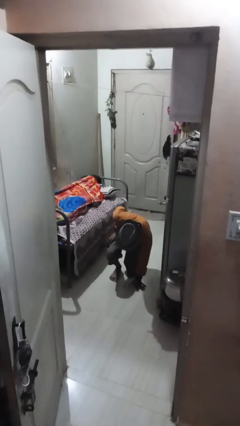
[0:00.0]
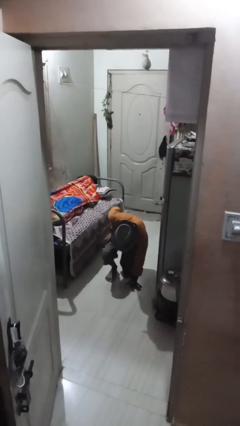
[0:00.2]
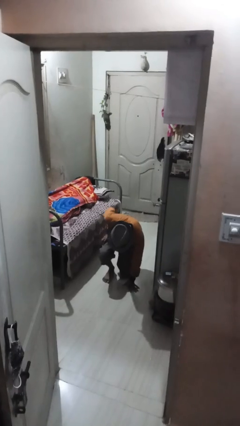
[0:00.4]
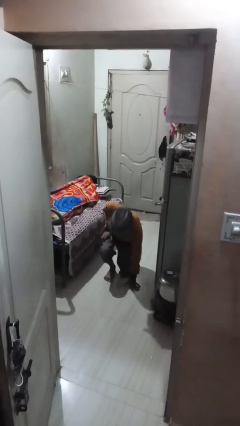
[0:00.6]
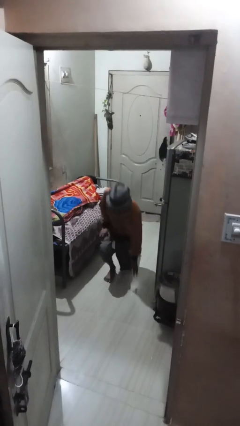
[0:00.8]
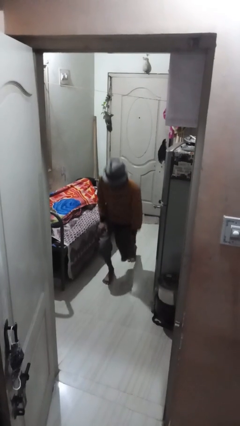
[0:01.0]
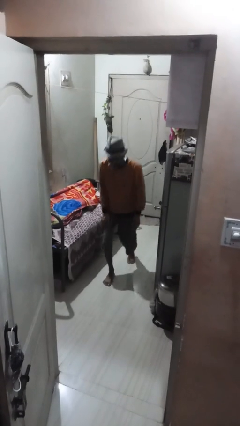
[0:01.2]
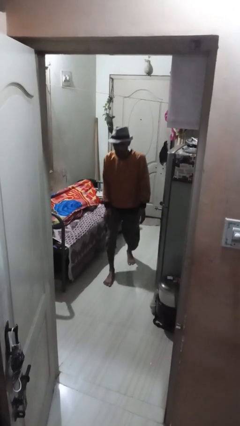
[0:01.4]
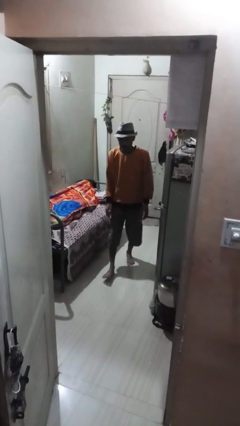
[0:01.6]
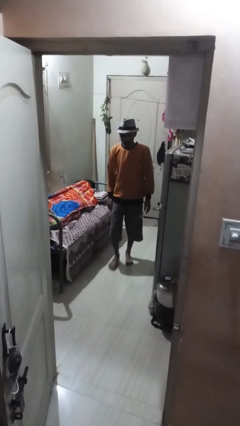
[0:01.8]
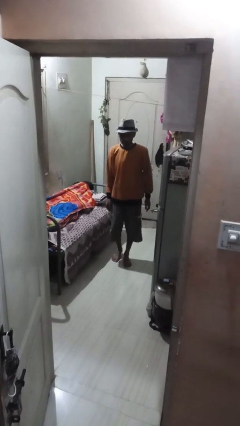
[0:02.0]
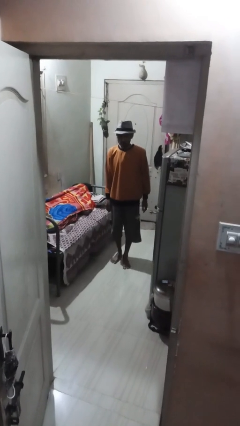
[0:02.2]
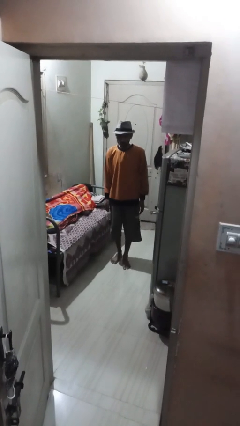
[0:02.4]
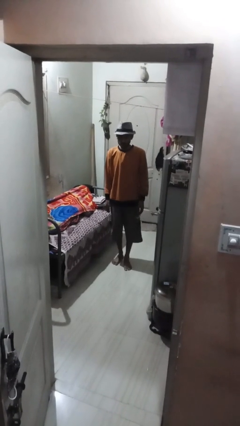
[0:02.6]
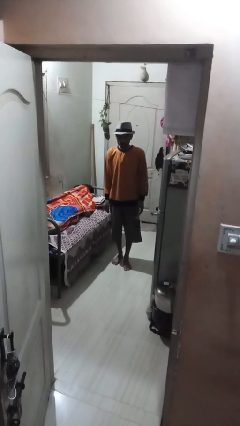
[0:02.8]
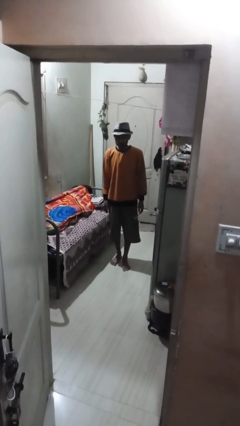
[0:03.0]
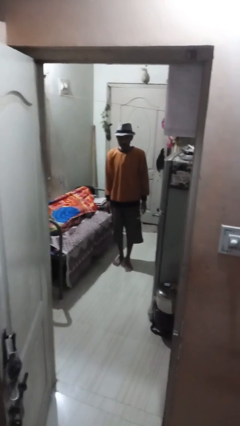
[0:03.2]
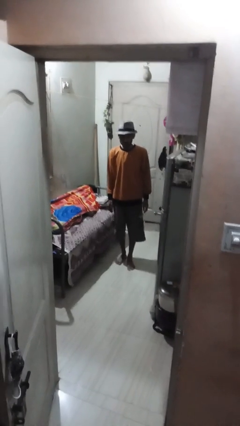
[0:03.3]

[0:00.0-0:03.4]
person stands up from floor

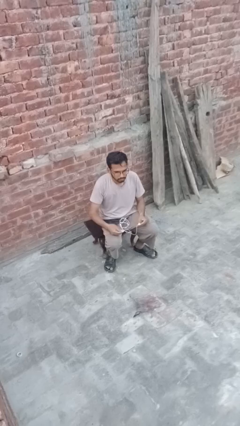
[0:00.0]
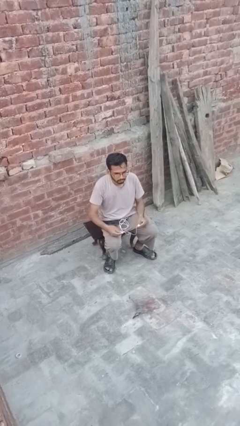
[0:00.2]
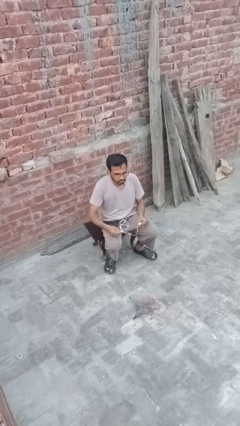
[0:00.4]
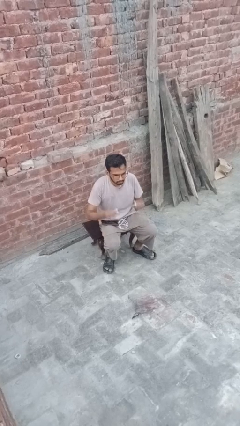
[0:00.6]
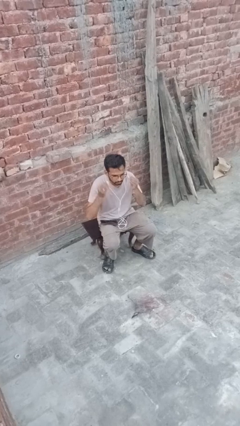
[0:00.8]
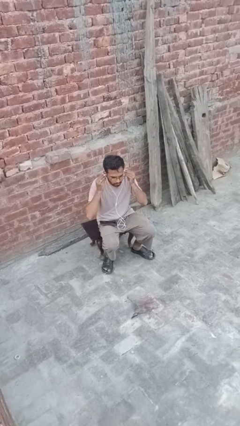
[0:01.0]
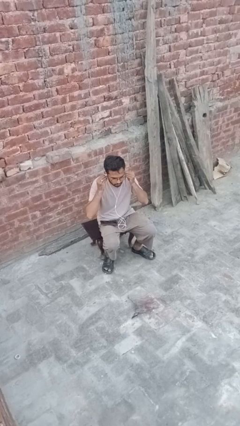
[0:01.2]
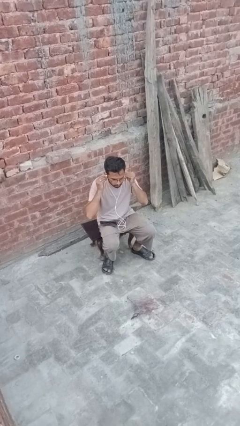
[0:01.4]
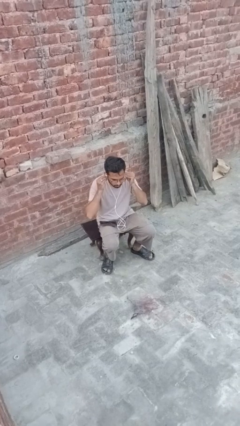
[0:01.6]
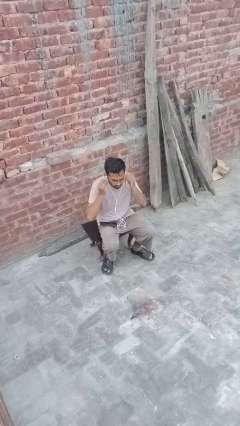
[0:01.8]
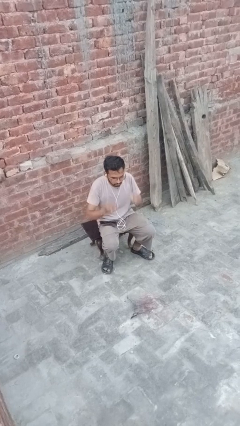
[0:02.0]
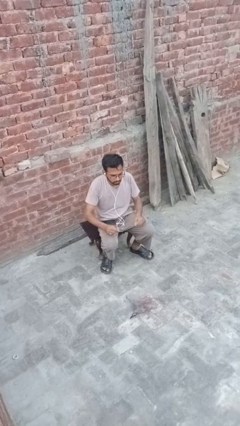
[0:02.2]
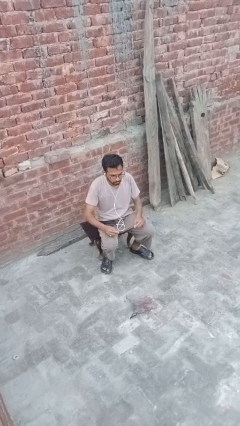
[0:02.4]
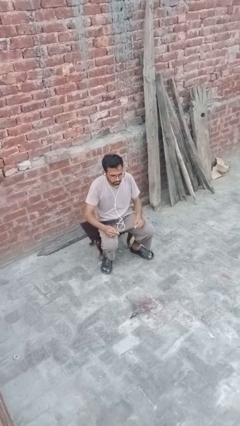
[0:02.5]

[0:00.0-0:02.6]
person puts on headphones

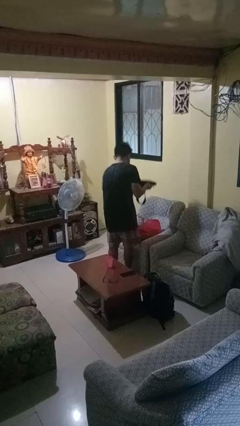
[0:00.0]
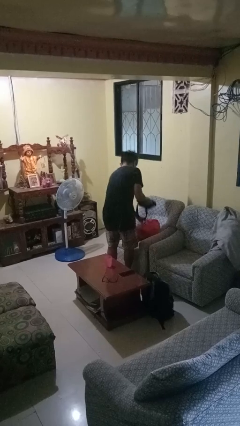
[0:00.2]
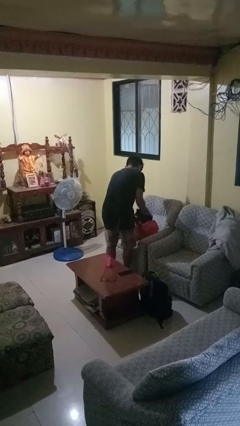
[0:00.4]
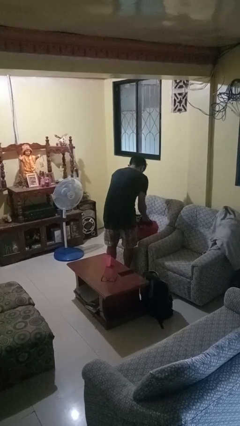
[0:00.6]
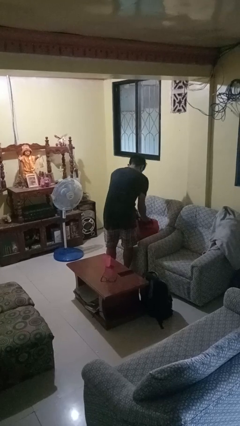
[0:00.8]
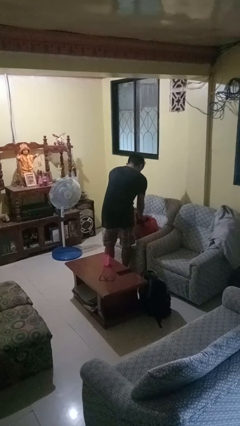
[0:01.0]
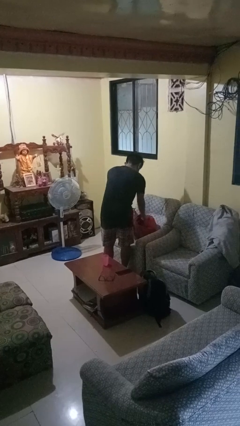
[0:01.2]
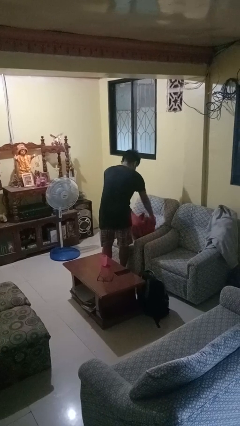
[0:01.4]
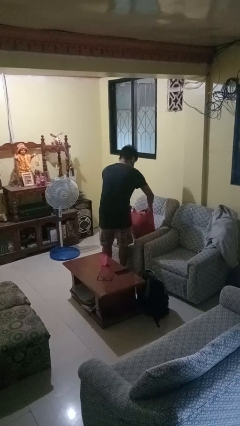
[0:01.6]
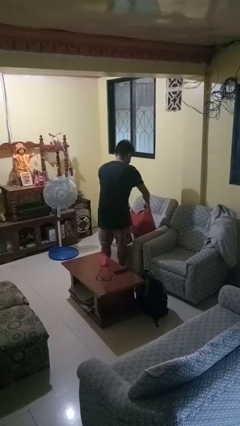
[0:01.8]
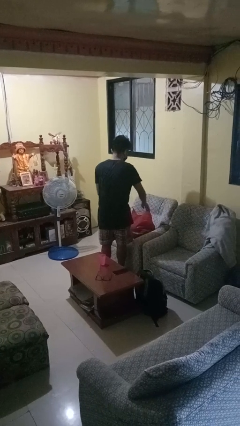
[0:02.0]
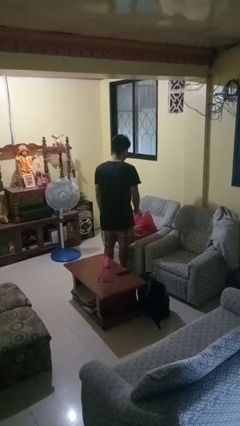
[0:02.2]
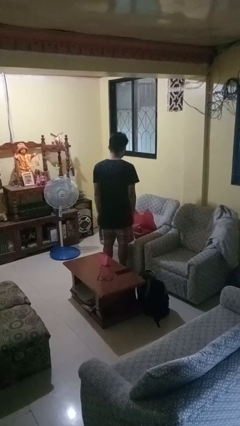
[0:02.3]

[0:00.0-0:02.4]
person puts object into bag

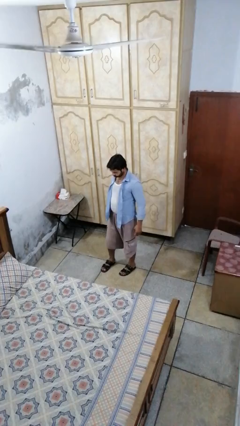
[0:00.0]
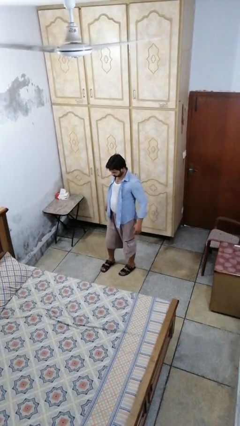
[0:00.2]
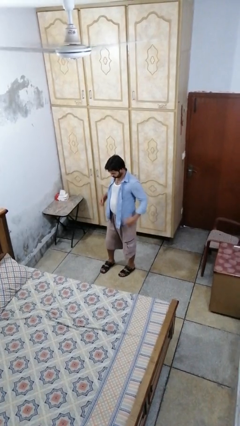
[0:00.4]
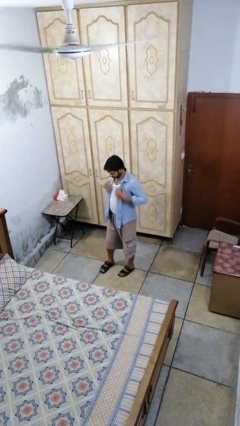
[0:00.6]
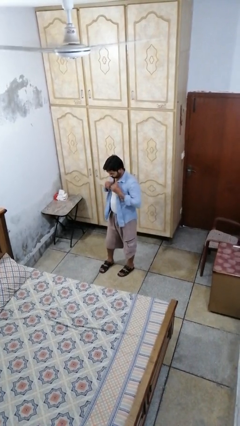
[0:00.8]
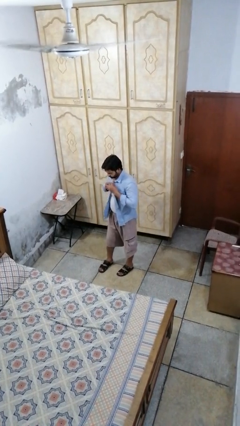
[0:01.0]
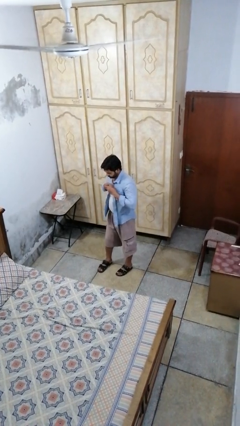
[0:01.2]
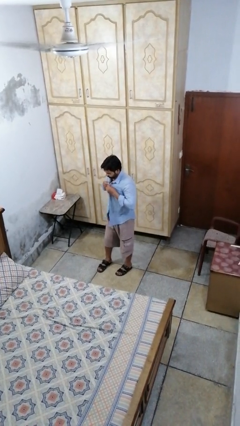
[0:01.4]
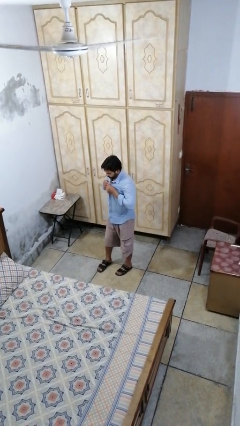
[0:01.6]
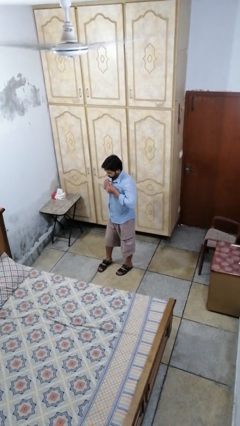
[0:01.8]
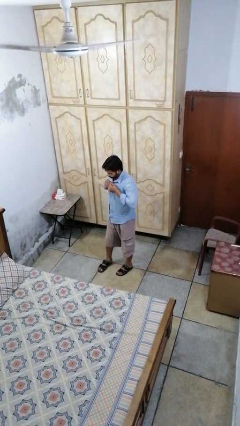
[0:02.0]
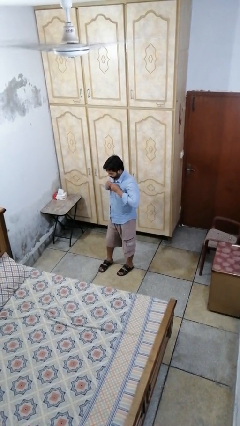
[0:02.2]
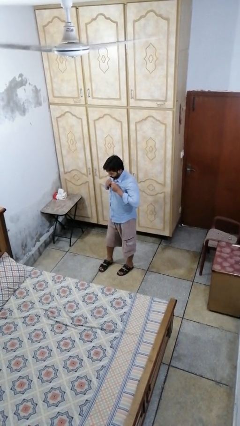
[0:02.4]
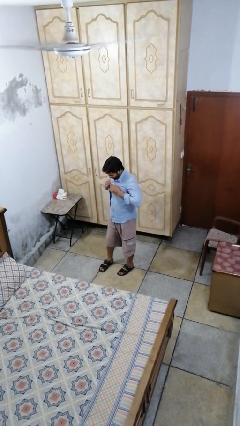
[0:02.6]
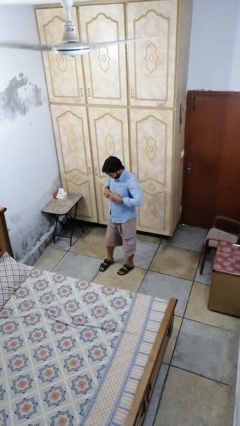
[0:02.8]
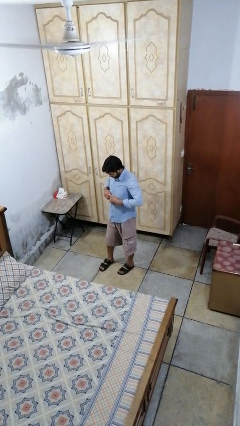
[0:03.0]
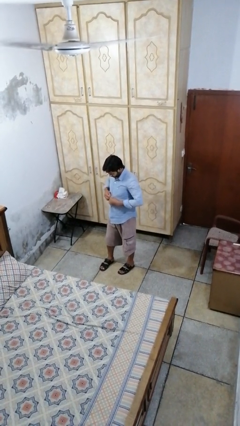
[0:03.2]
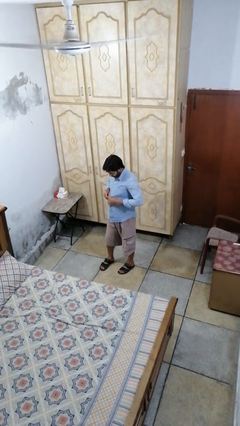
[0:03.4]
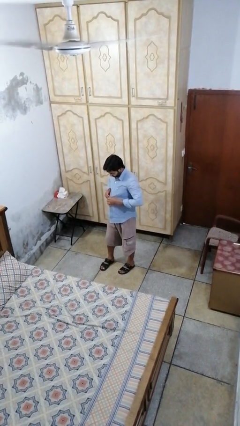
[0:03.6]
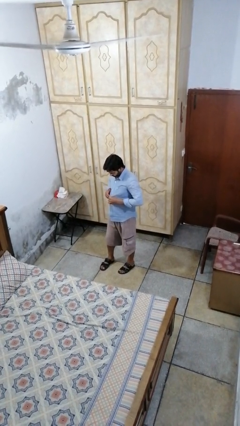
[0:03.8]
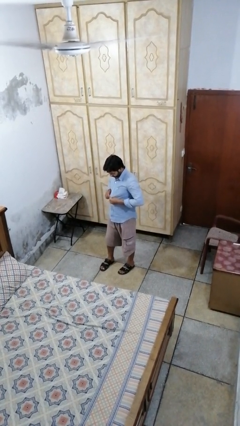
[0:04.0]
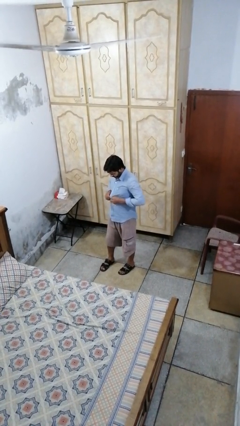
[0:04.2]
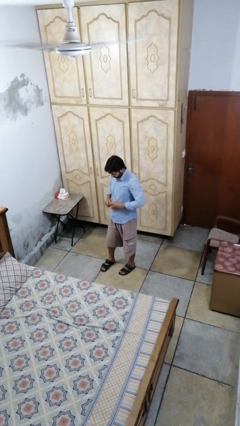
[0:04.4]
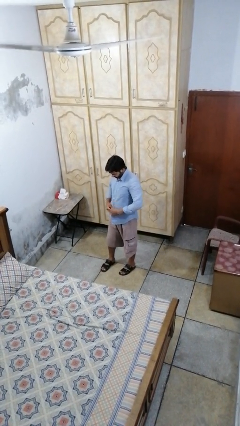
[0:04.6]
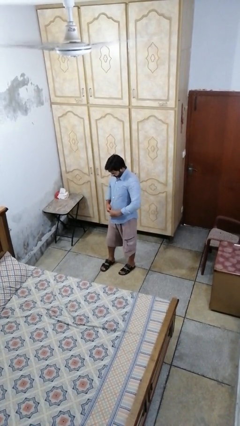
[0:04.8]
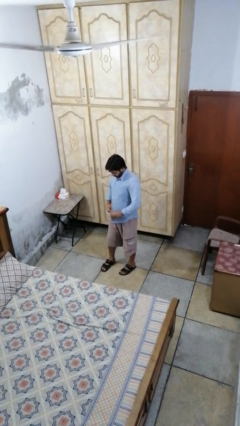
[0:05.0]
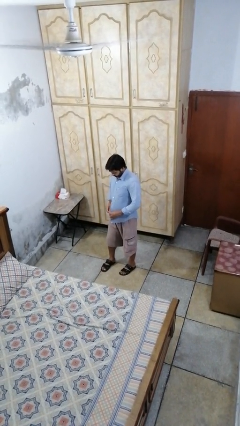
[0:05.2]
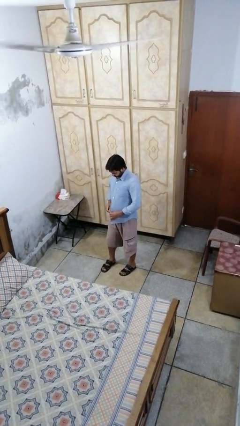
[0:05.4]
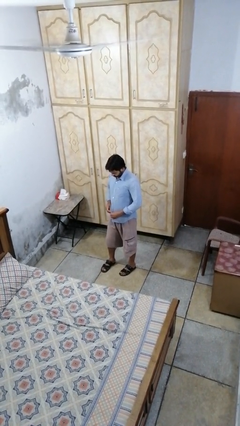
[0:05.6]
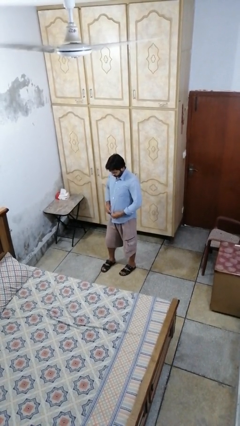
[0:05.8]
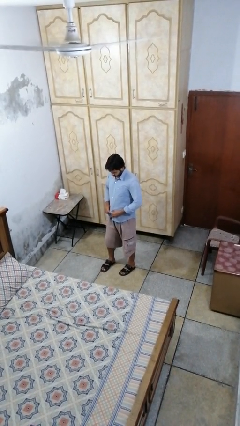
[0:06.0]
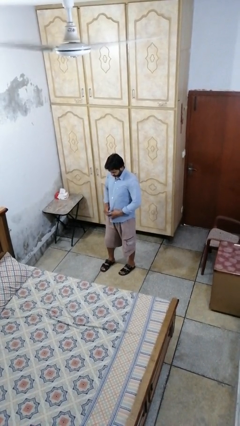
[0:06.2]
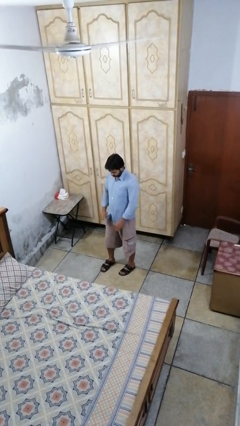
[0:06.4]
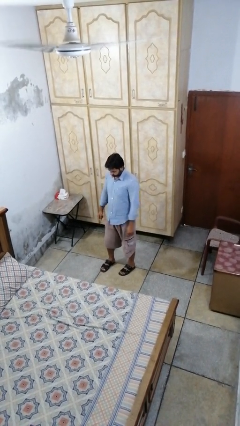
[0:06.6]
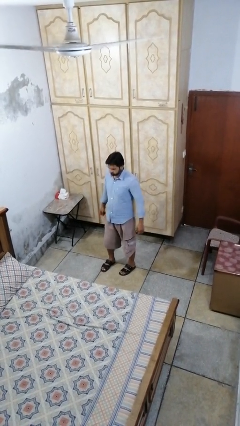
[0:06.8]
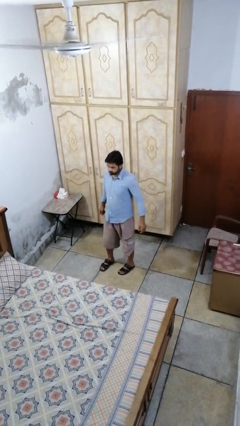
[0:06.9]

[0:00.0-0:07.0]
person buttons shirt

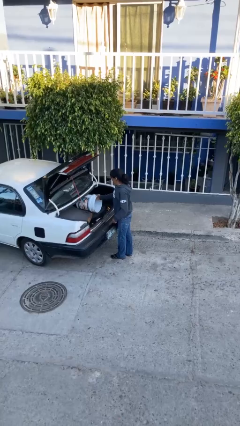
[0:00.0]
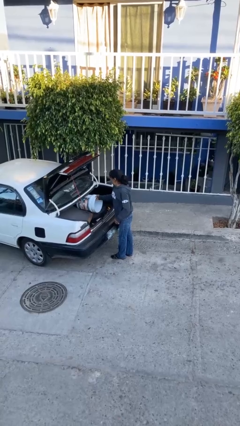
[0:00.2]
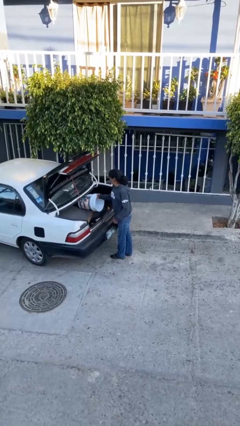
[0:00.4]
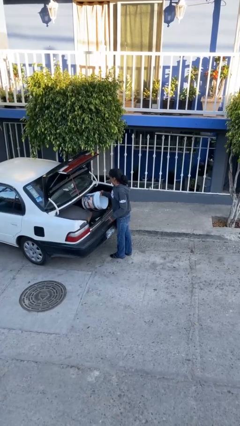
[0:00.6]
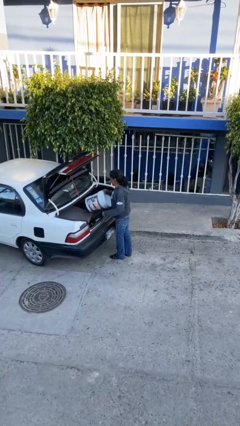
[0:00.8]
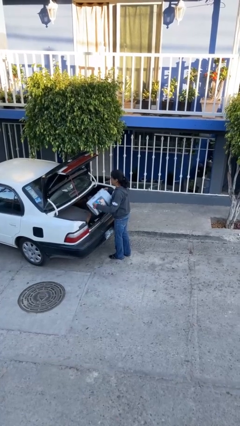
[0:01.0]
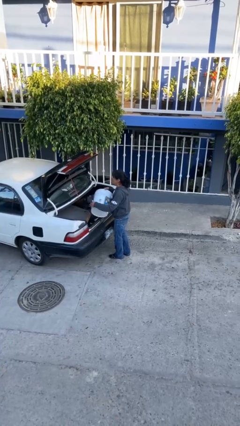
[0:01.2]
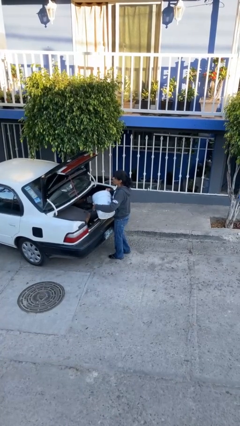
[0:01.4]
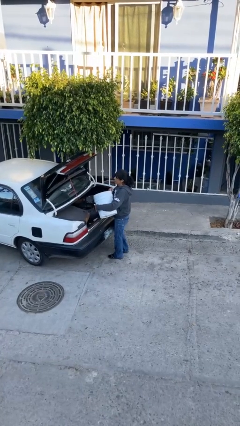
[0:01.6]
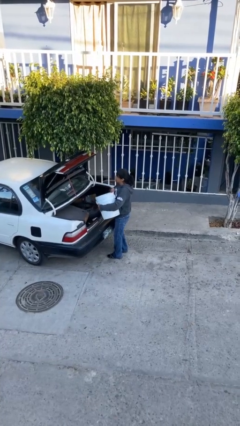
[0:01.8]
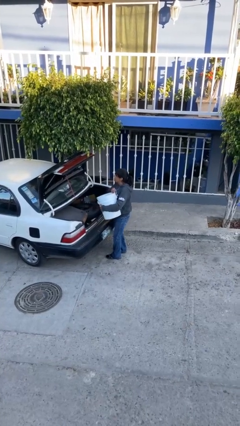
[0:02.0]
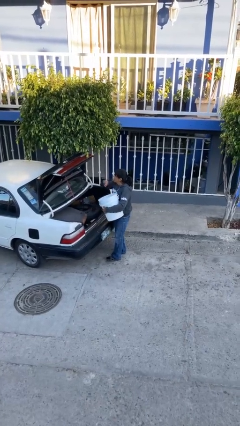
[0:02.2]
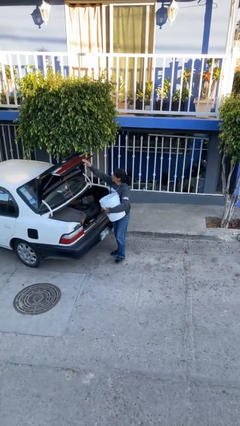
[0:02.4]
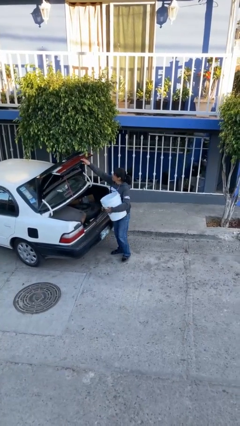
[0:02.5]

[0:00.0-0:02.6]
person unloads car
